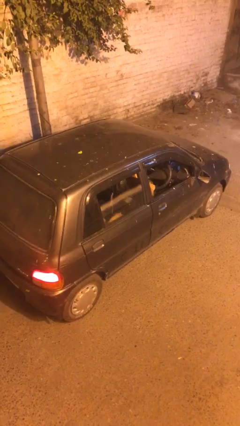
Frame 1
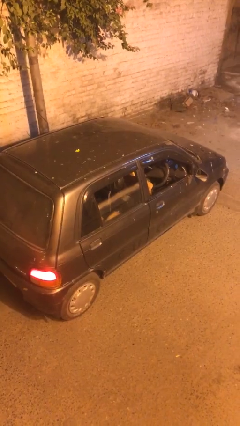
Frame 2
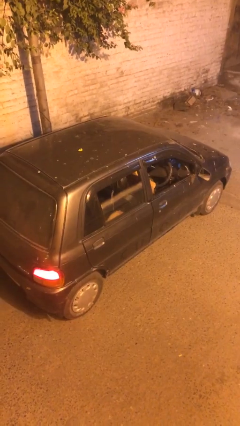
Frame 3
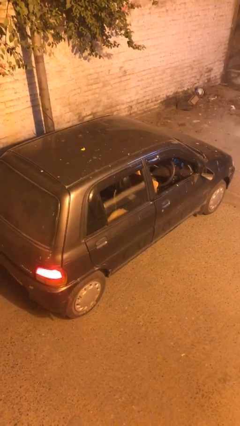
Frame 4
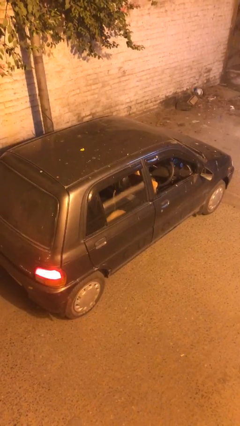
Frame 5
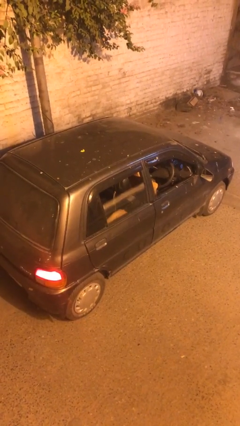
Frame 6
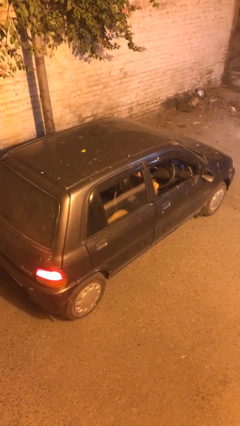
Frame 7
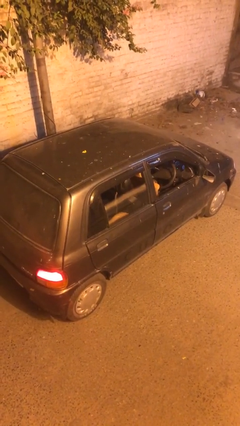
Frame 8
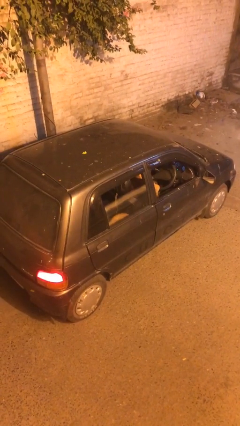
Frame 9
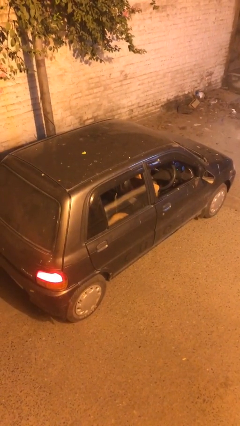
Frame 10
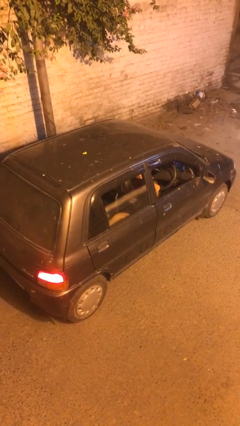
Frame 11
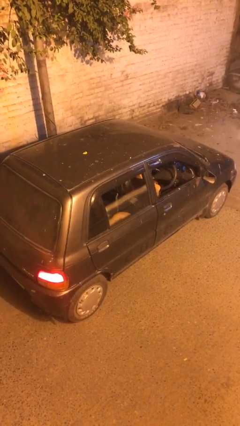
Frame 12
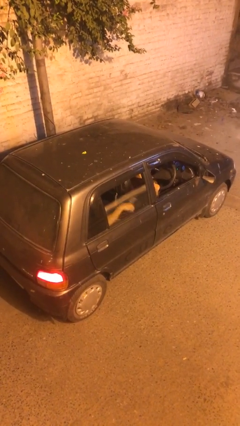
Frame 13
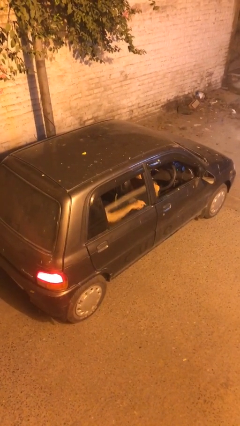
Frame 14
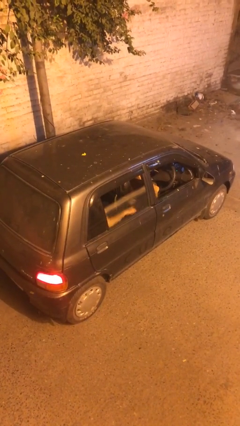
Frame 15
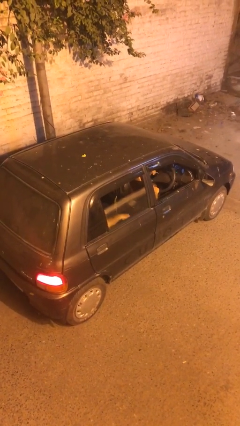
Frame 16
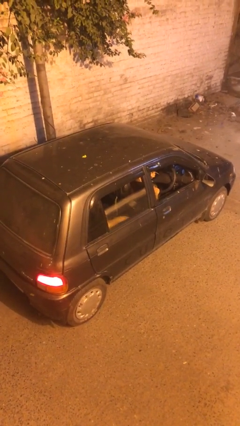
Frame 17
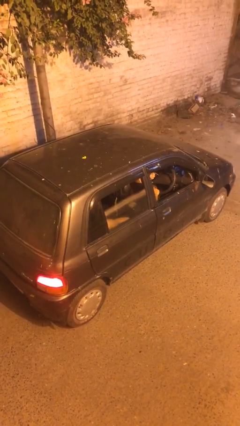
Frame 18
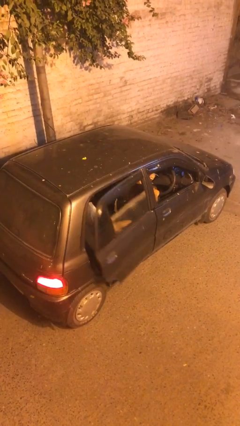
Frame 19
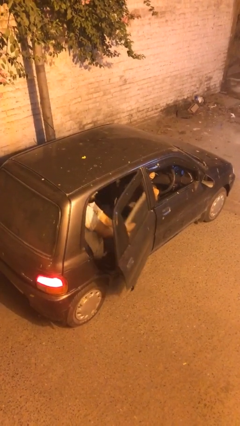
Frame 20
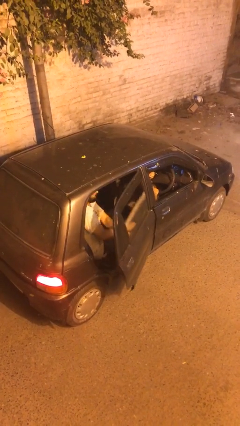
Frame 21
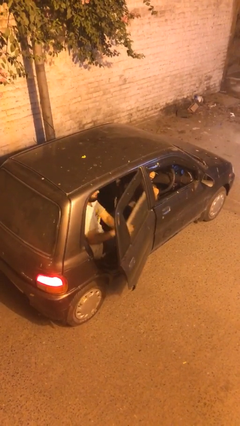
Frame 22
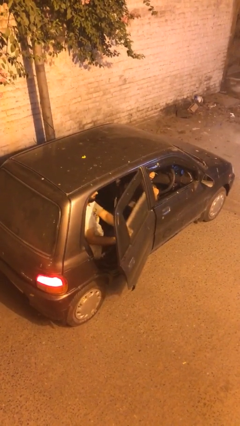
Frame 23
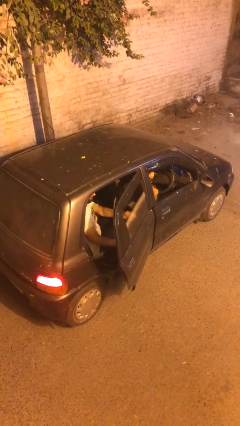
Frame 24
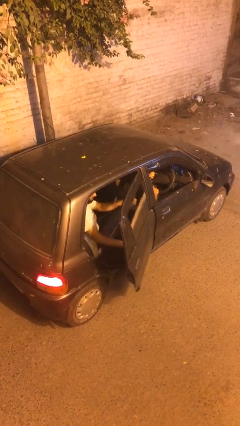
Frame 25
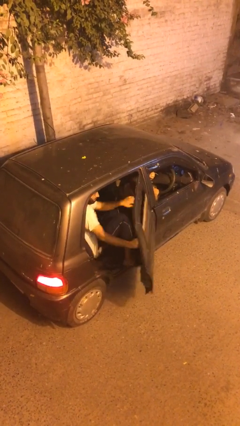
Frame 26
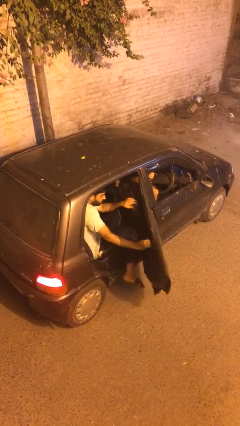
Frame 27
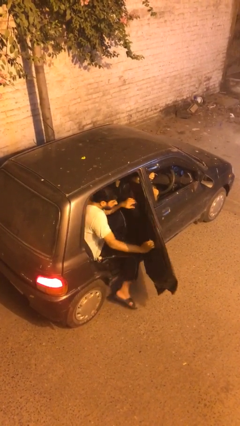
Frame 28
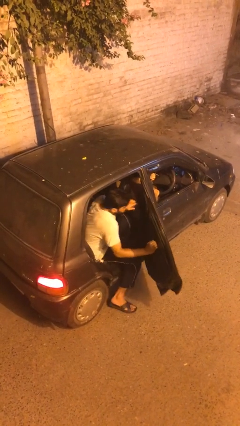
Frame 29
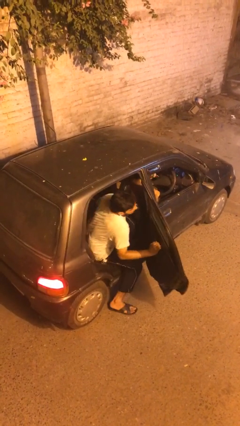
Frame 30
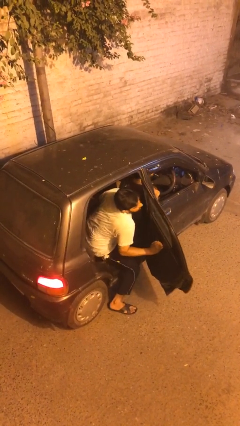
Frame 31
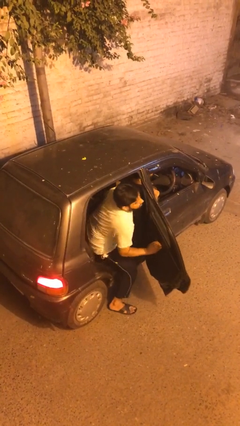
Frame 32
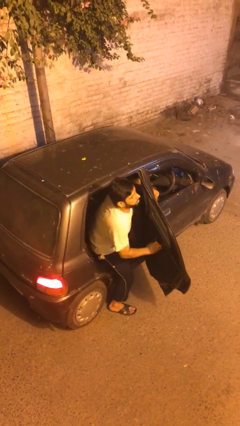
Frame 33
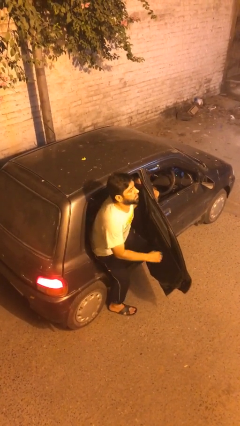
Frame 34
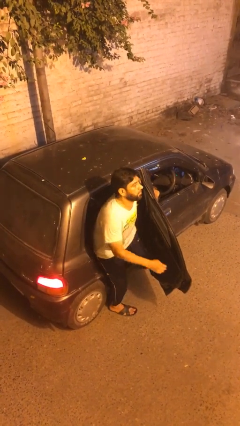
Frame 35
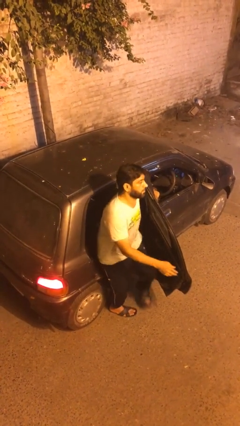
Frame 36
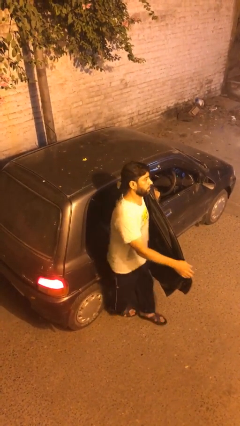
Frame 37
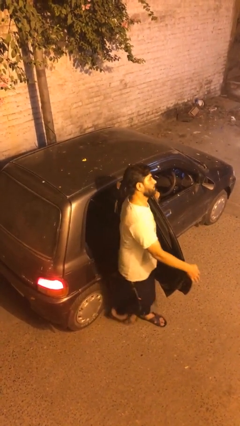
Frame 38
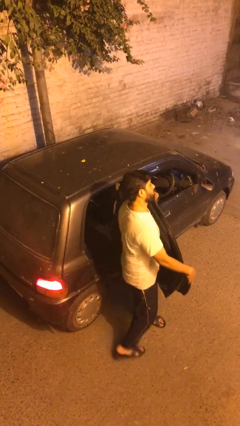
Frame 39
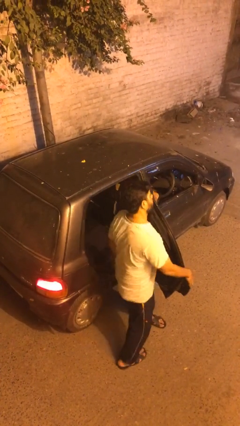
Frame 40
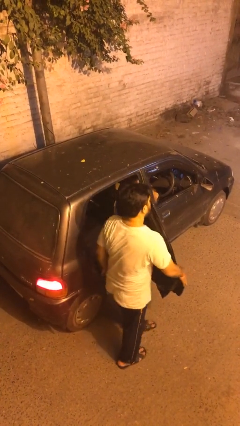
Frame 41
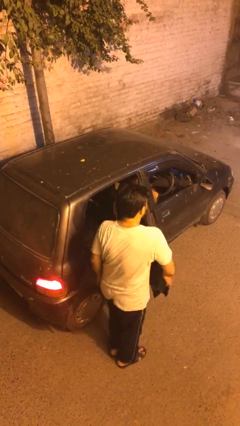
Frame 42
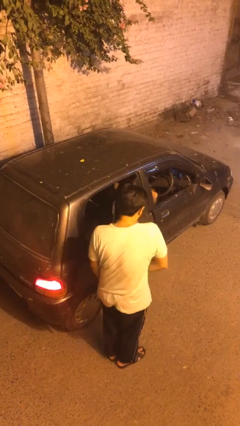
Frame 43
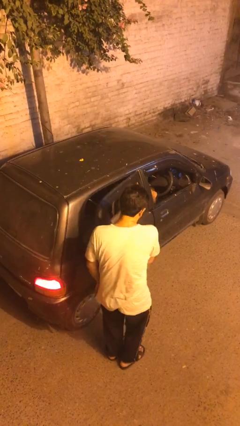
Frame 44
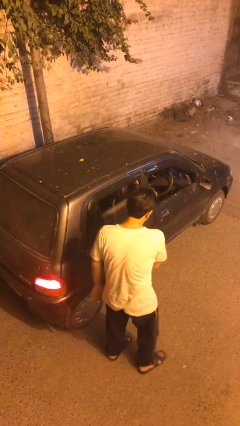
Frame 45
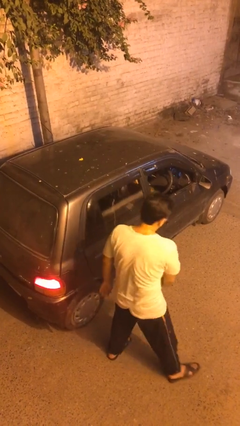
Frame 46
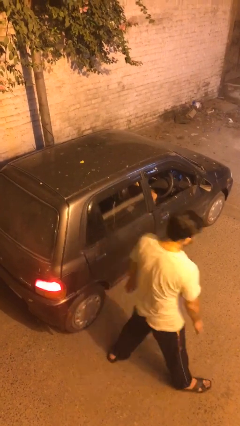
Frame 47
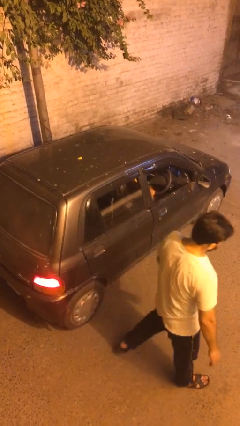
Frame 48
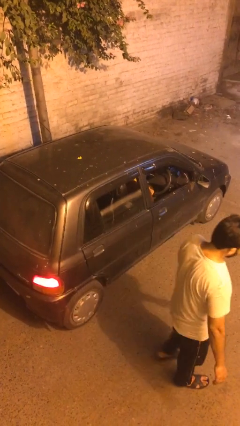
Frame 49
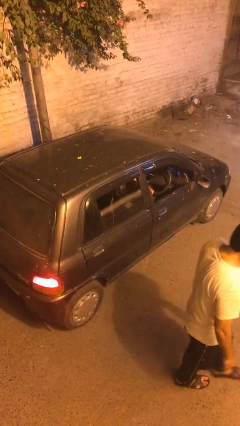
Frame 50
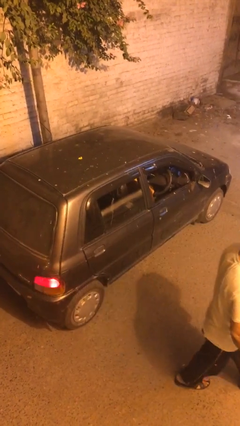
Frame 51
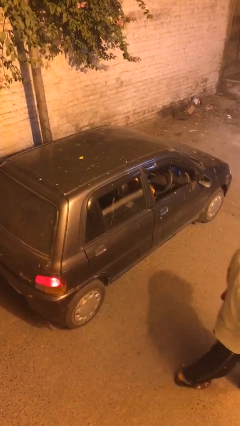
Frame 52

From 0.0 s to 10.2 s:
car drops off person

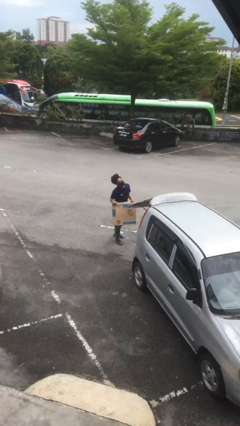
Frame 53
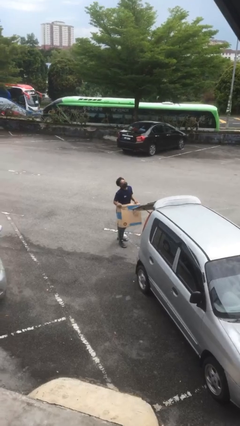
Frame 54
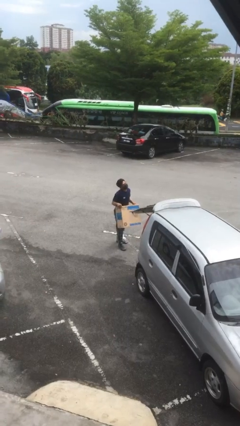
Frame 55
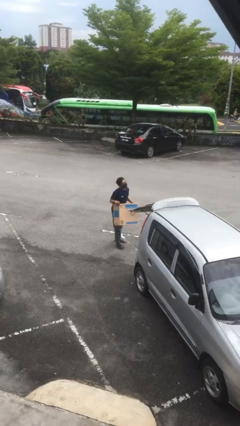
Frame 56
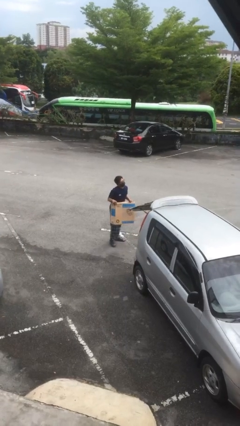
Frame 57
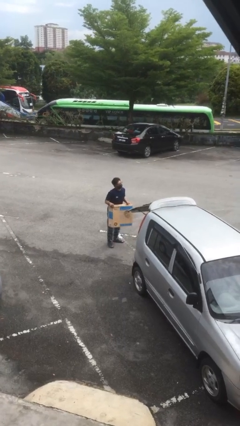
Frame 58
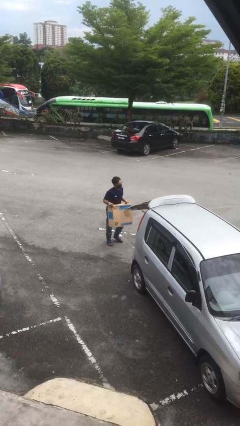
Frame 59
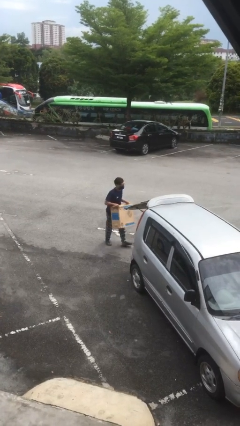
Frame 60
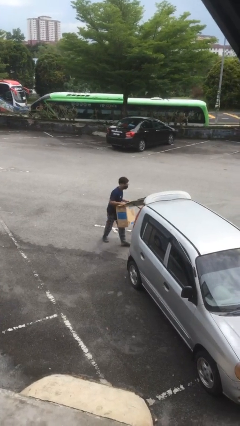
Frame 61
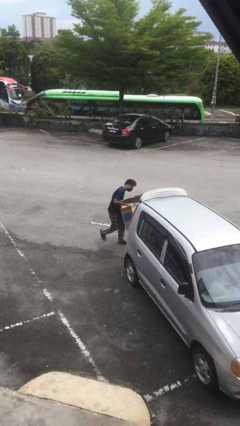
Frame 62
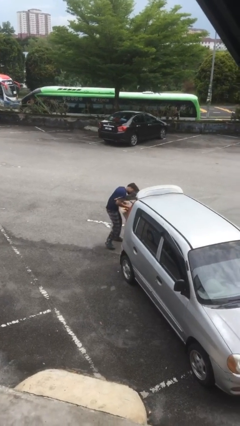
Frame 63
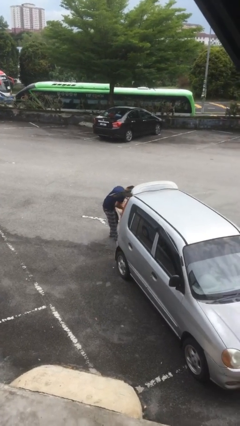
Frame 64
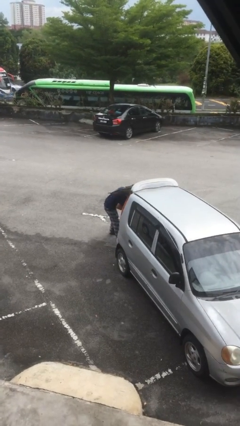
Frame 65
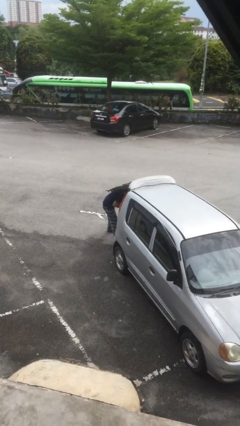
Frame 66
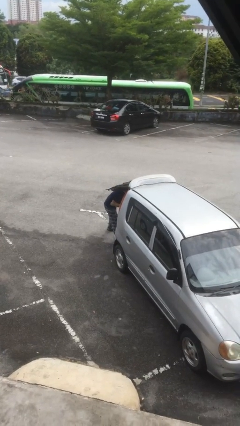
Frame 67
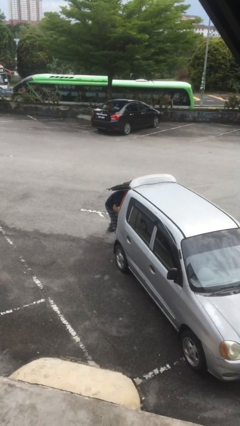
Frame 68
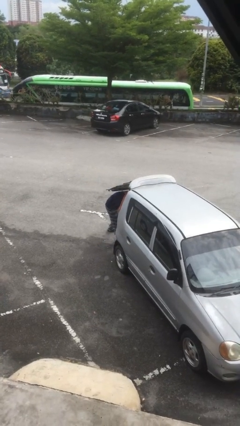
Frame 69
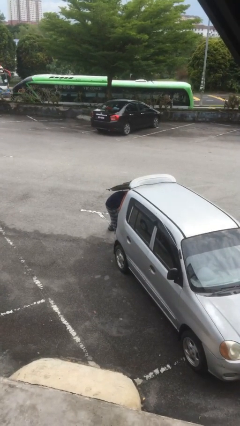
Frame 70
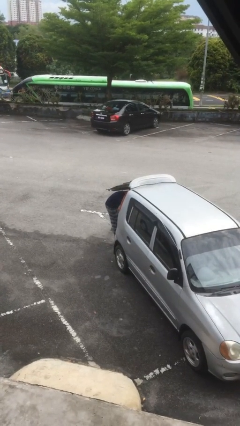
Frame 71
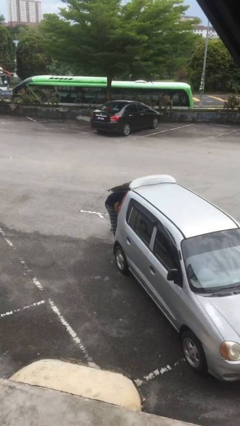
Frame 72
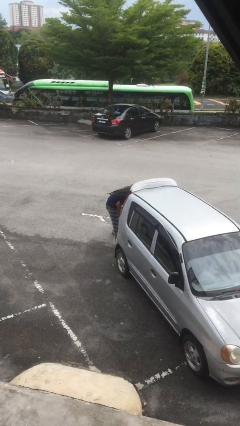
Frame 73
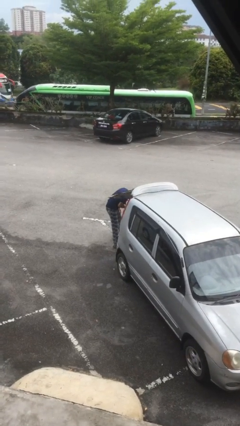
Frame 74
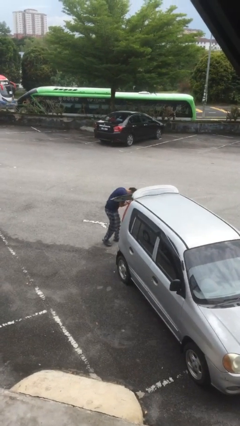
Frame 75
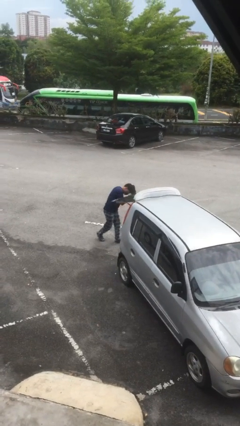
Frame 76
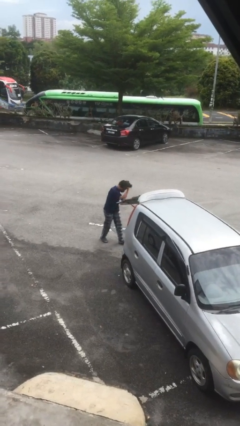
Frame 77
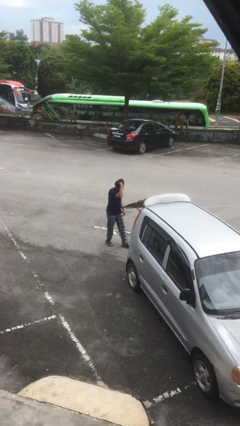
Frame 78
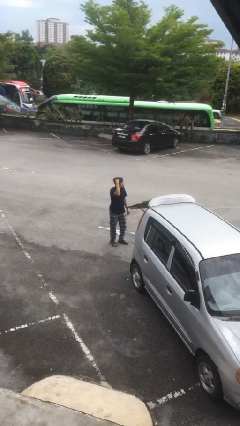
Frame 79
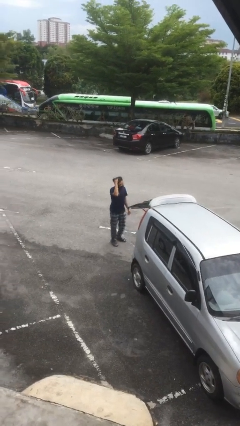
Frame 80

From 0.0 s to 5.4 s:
person loads car

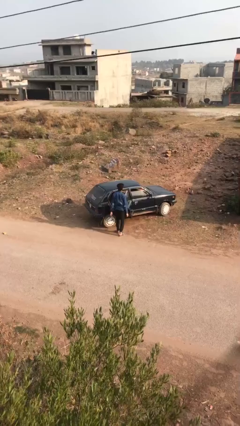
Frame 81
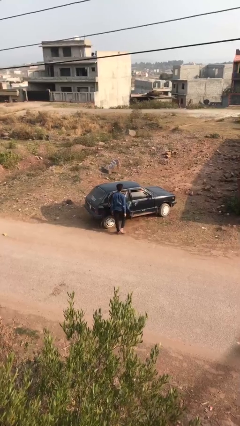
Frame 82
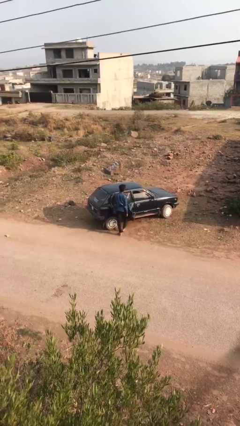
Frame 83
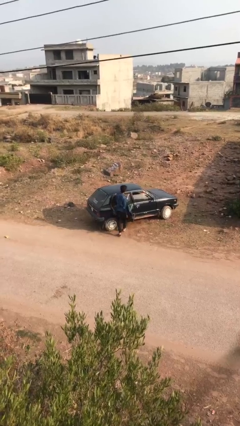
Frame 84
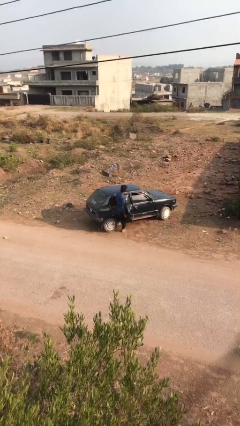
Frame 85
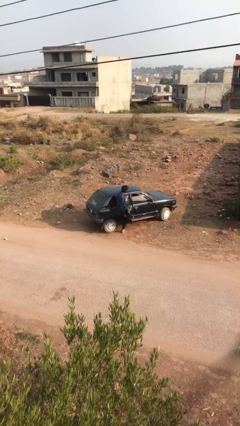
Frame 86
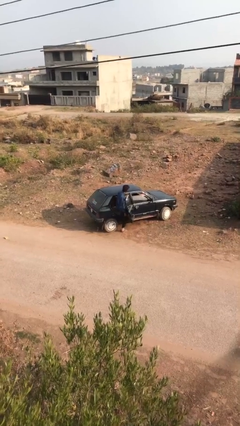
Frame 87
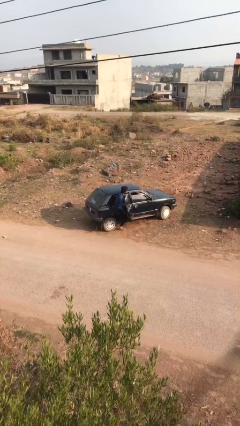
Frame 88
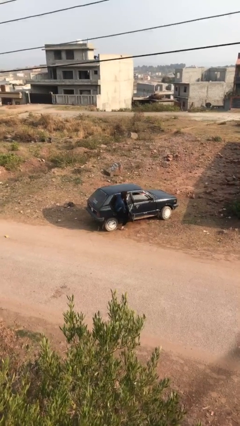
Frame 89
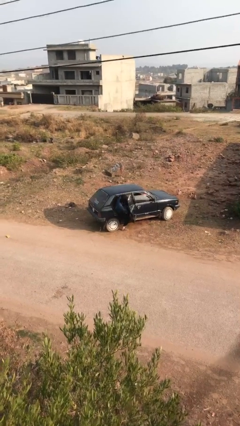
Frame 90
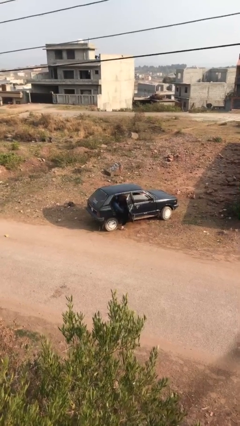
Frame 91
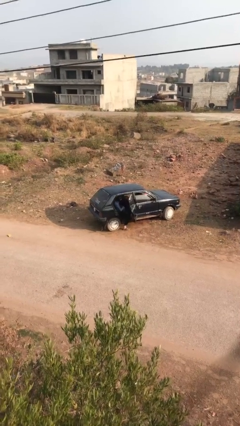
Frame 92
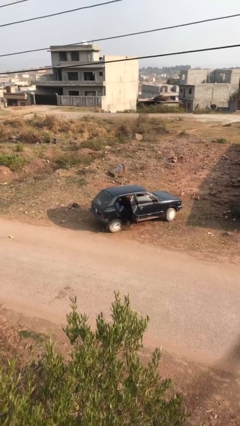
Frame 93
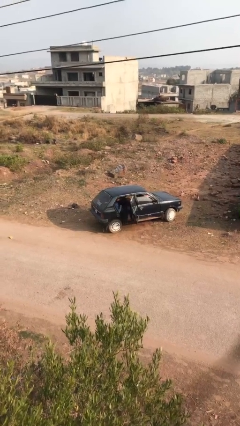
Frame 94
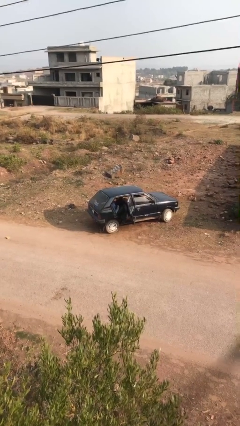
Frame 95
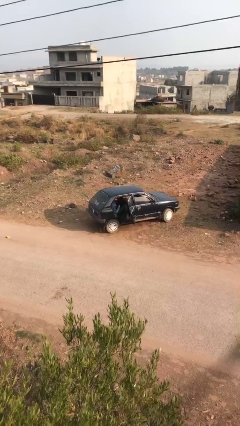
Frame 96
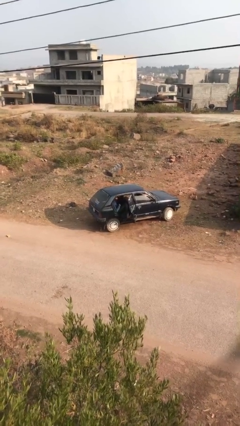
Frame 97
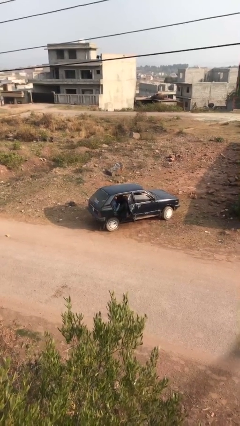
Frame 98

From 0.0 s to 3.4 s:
person enters car
